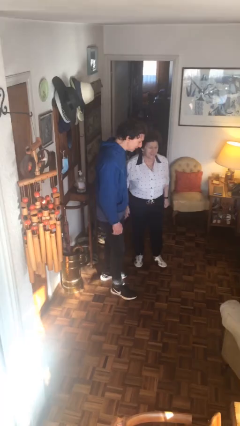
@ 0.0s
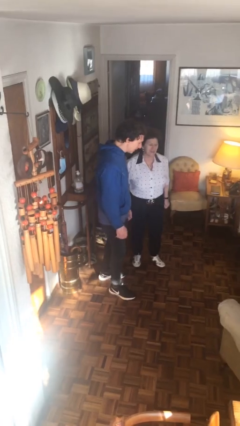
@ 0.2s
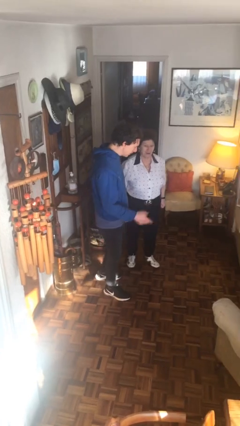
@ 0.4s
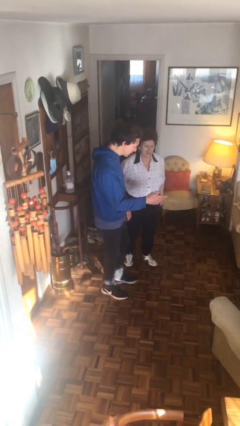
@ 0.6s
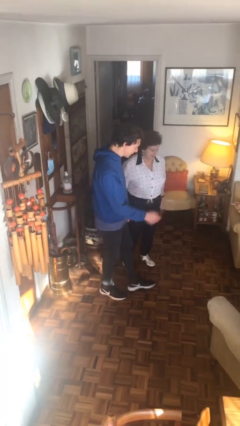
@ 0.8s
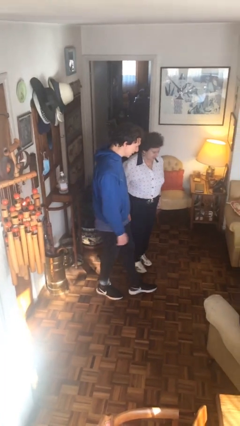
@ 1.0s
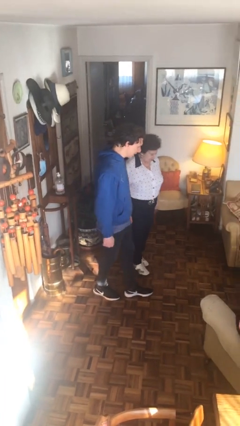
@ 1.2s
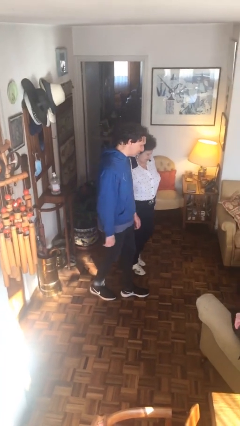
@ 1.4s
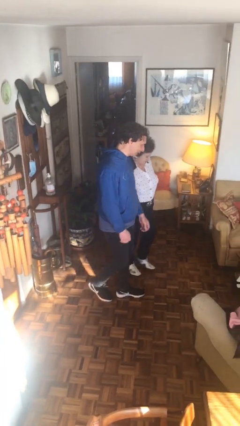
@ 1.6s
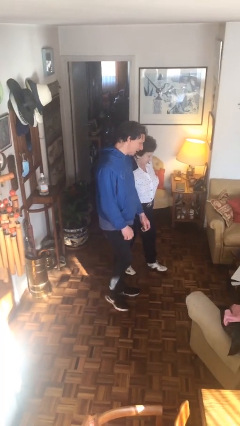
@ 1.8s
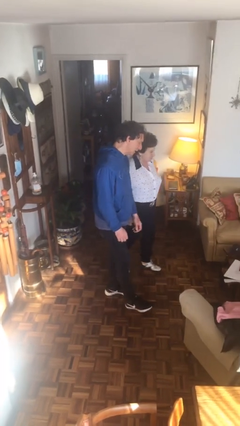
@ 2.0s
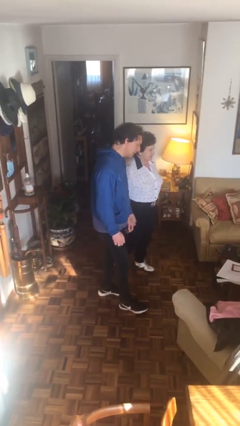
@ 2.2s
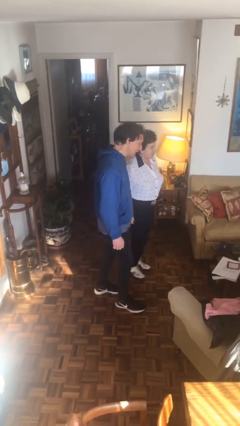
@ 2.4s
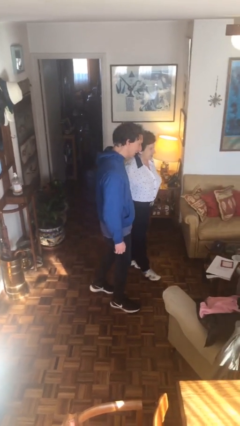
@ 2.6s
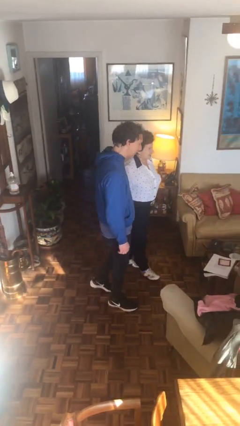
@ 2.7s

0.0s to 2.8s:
person talks to person

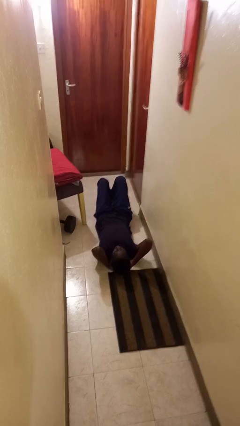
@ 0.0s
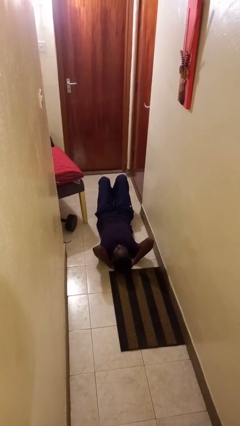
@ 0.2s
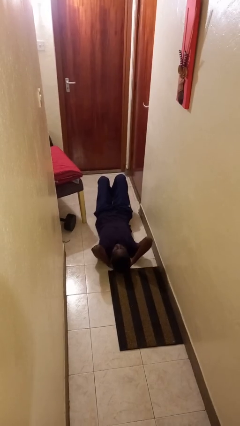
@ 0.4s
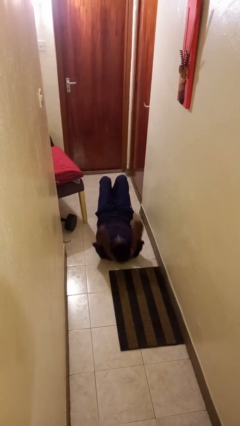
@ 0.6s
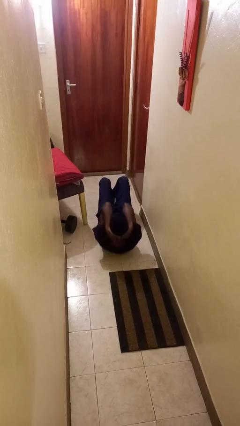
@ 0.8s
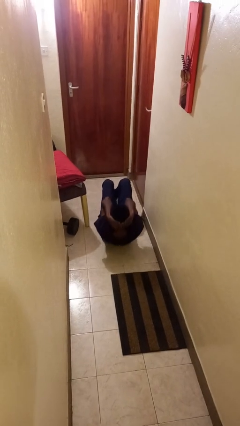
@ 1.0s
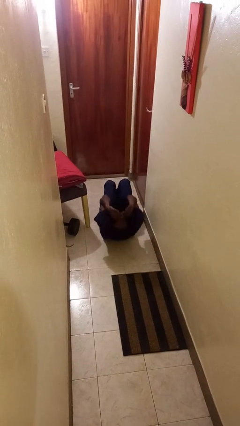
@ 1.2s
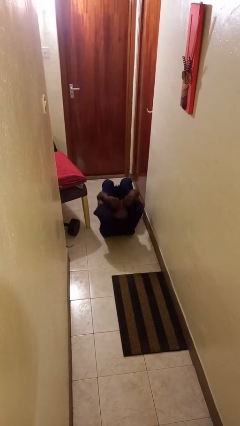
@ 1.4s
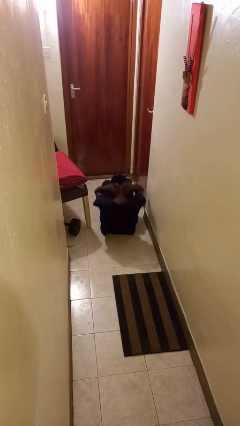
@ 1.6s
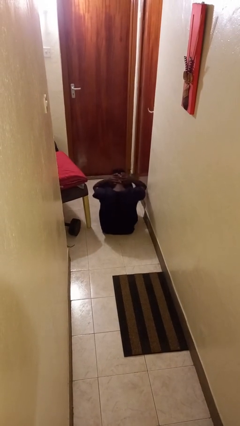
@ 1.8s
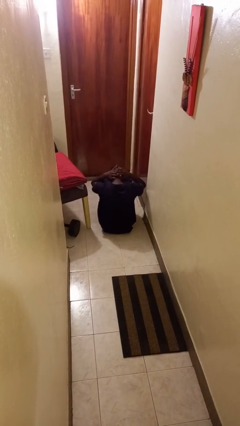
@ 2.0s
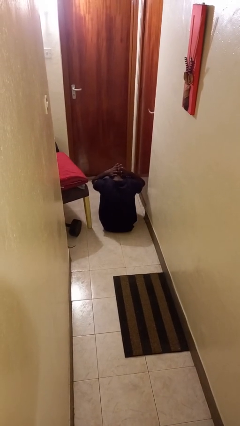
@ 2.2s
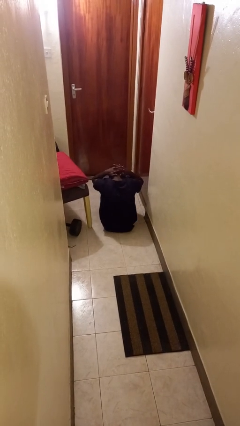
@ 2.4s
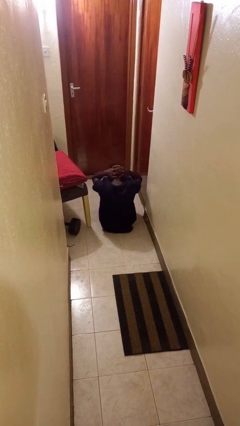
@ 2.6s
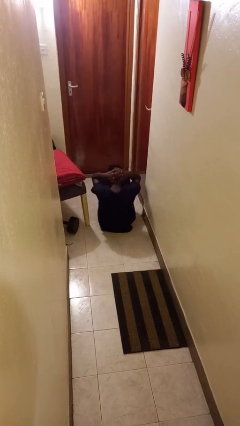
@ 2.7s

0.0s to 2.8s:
person exercises with situp

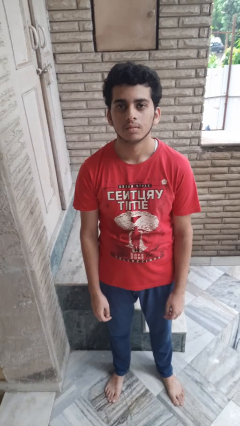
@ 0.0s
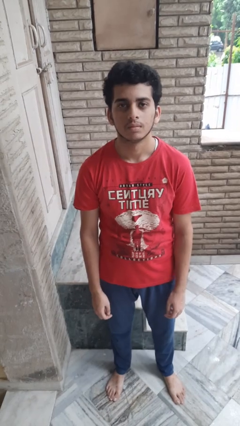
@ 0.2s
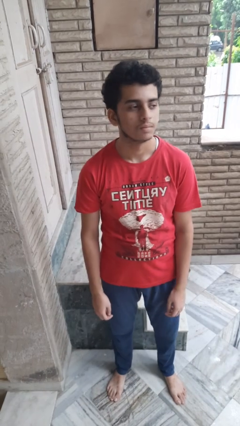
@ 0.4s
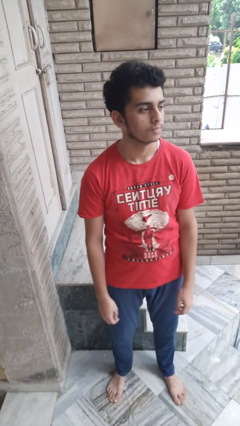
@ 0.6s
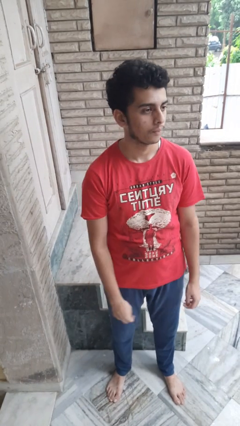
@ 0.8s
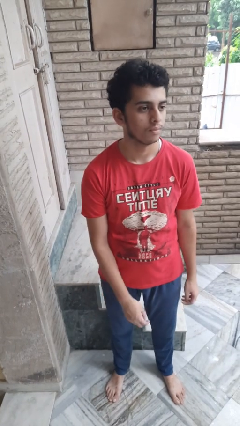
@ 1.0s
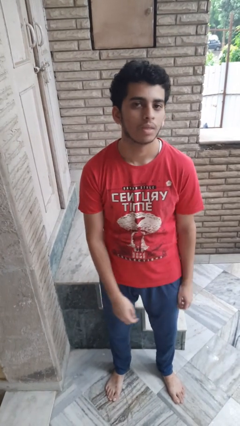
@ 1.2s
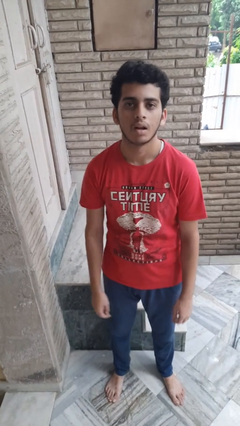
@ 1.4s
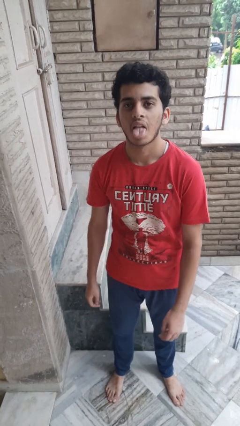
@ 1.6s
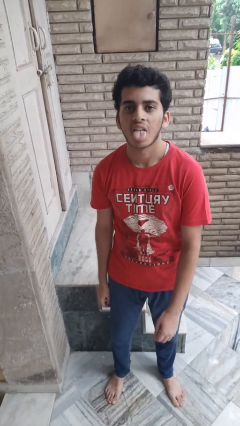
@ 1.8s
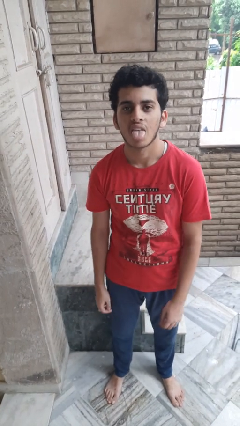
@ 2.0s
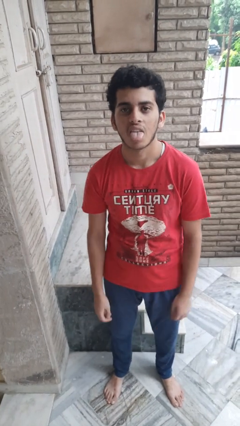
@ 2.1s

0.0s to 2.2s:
person sticks out tongue

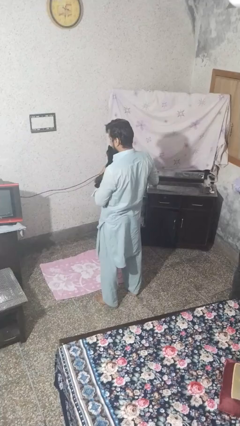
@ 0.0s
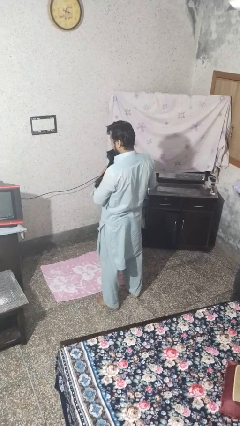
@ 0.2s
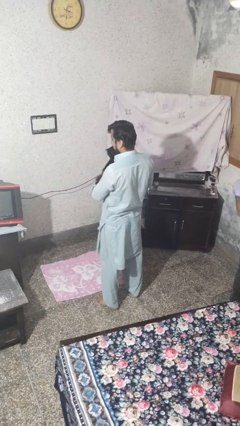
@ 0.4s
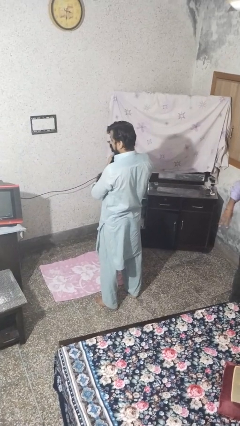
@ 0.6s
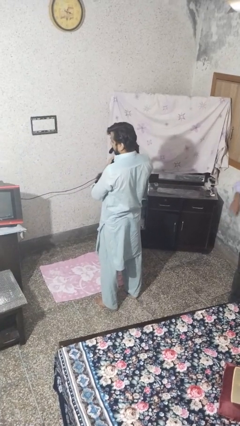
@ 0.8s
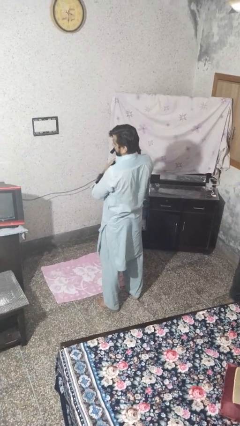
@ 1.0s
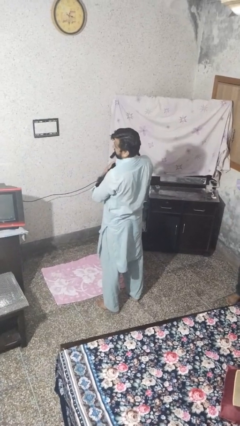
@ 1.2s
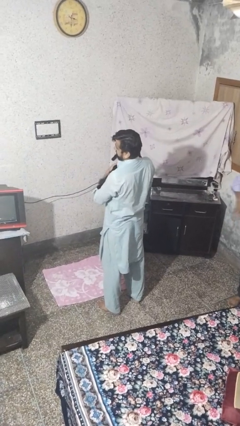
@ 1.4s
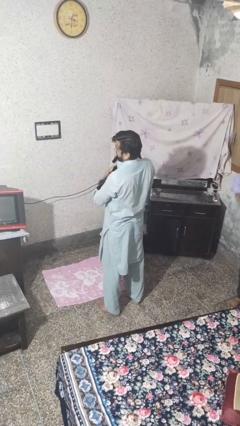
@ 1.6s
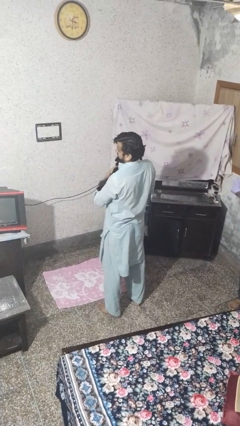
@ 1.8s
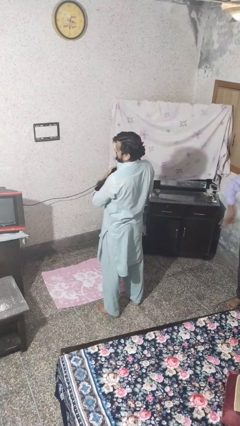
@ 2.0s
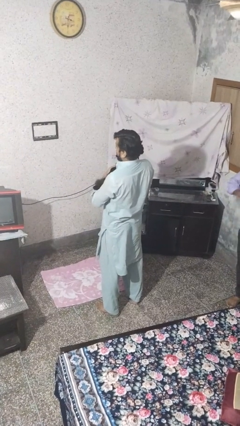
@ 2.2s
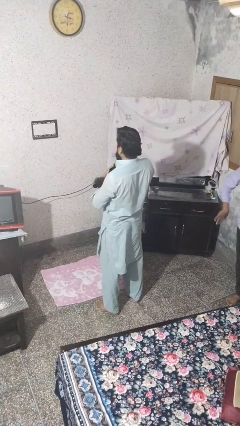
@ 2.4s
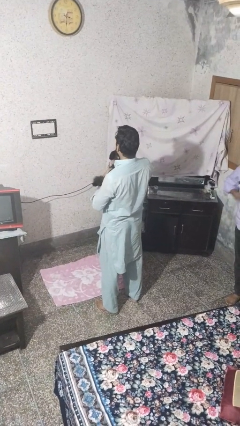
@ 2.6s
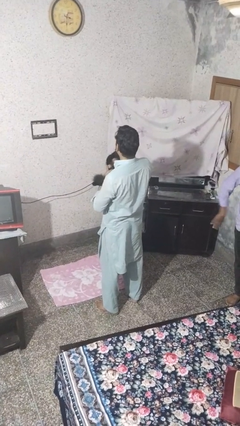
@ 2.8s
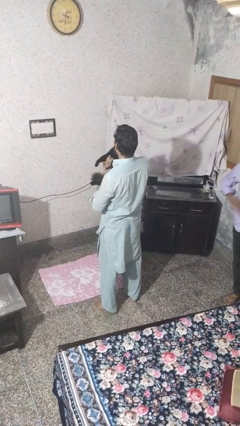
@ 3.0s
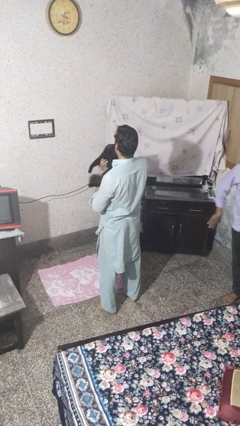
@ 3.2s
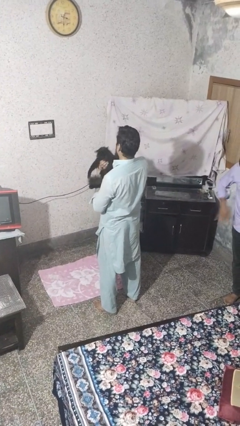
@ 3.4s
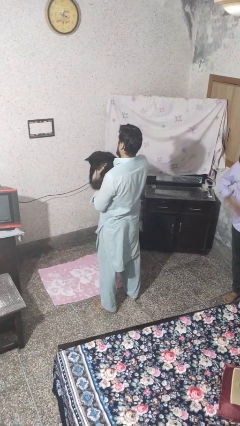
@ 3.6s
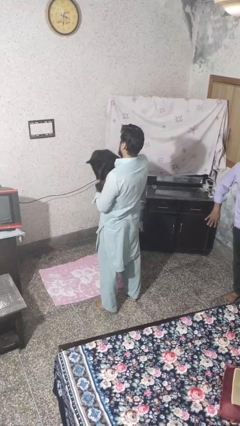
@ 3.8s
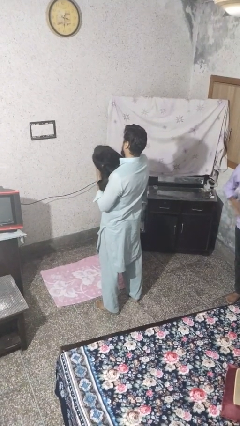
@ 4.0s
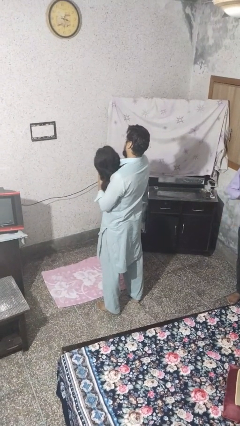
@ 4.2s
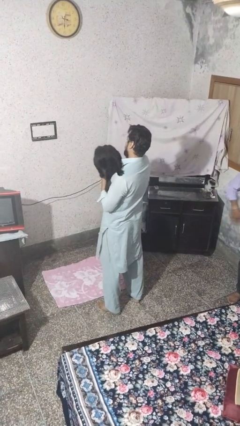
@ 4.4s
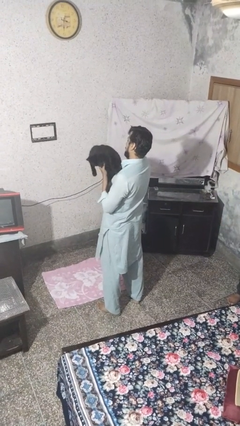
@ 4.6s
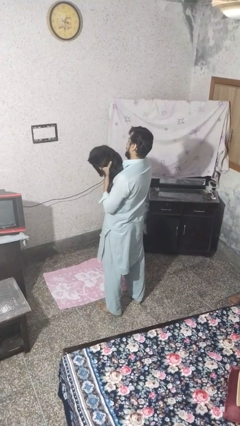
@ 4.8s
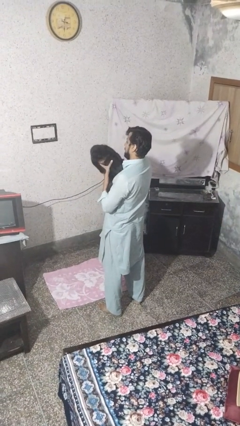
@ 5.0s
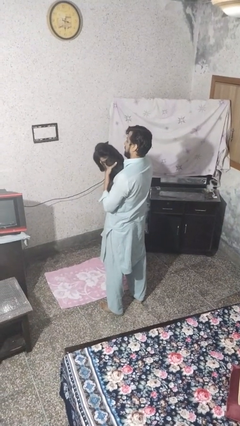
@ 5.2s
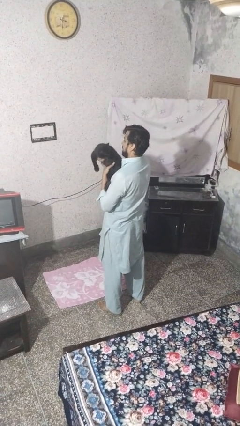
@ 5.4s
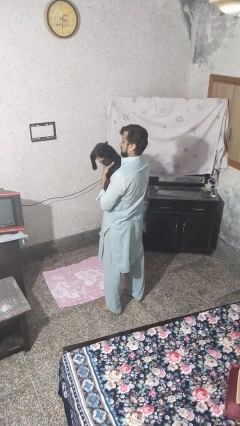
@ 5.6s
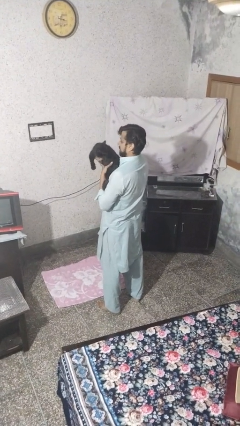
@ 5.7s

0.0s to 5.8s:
person hugs cat

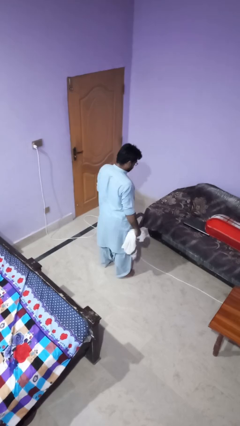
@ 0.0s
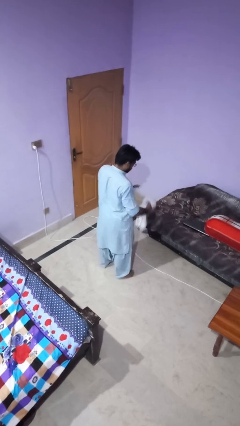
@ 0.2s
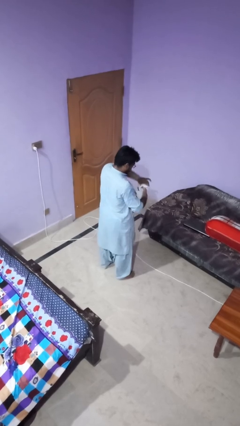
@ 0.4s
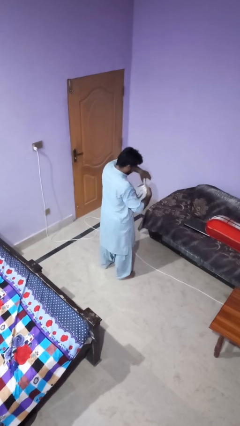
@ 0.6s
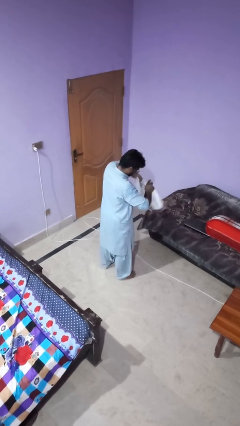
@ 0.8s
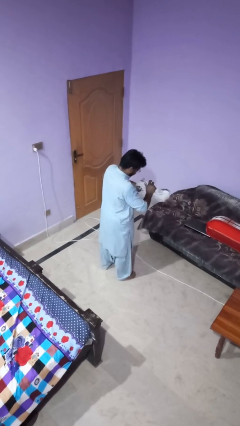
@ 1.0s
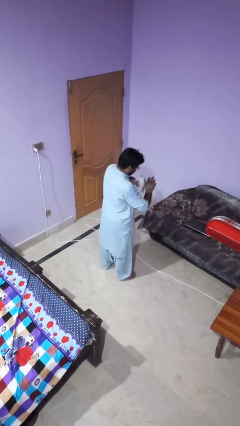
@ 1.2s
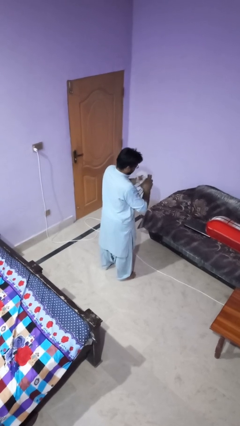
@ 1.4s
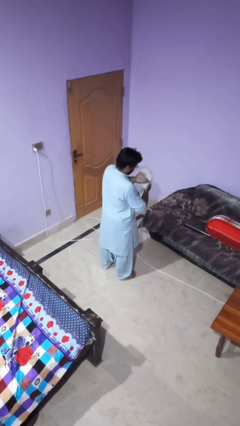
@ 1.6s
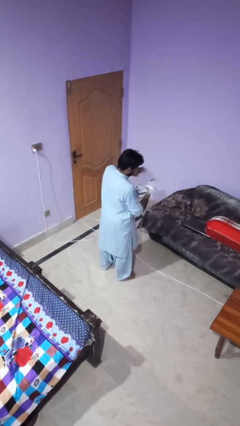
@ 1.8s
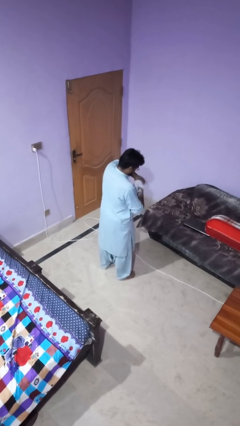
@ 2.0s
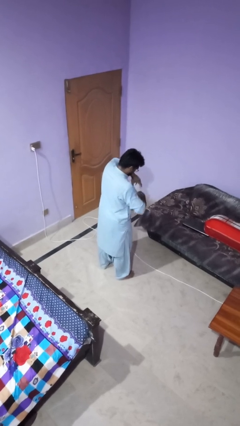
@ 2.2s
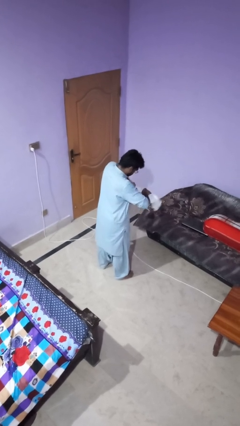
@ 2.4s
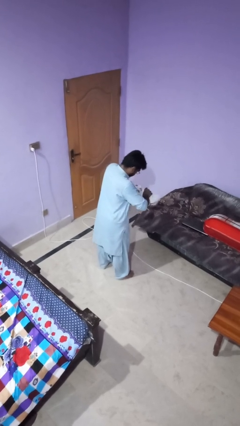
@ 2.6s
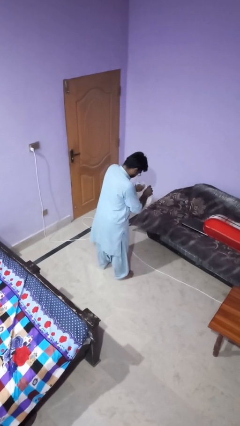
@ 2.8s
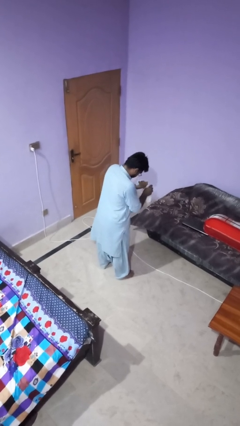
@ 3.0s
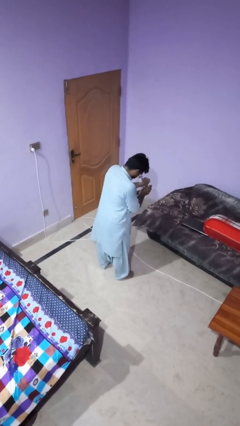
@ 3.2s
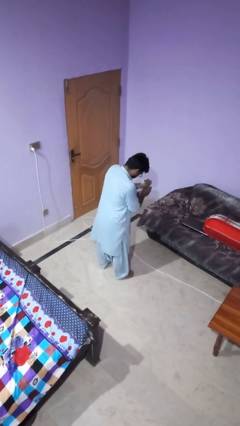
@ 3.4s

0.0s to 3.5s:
person squeezes object

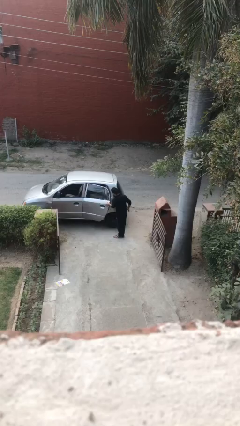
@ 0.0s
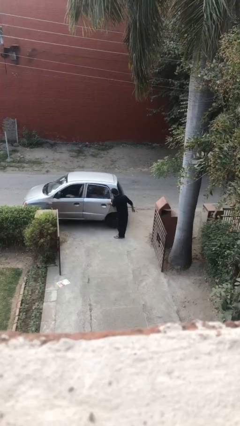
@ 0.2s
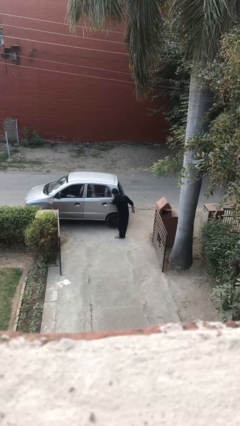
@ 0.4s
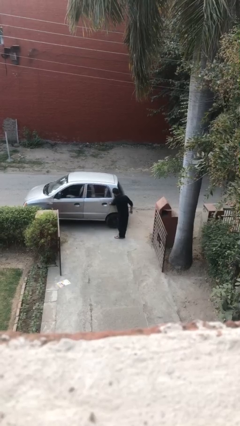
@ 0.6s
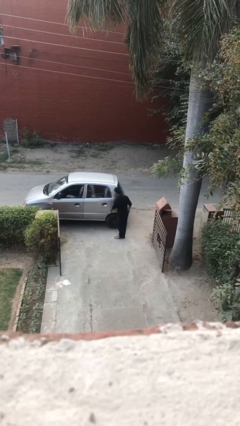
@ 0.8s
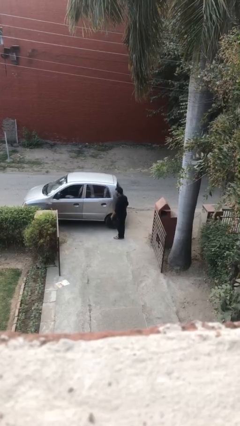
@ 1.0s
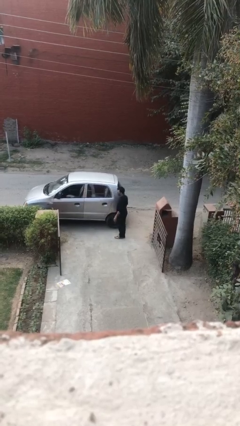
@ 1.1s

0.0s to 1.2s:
person closes car door
